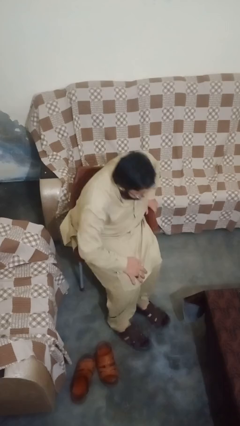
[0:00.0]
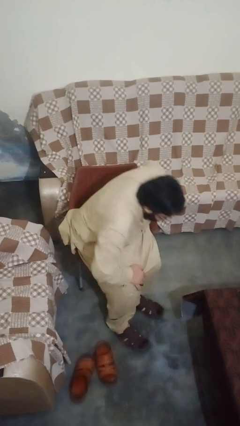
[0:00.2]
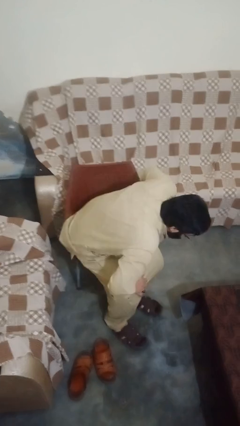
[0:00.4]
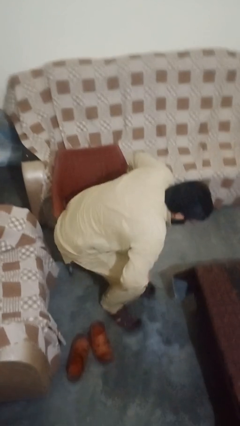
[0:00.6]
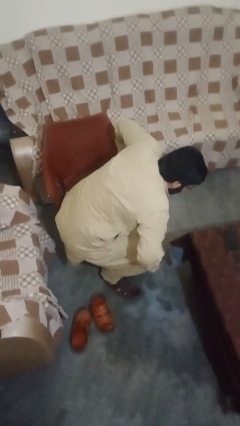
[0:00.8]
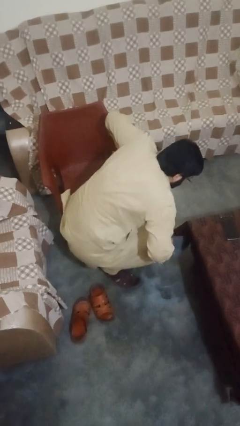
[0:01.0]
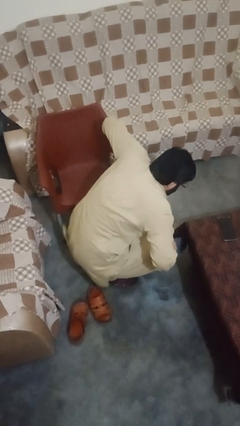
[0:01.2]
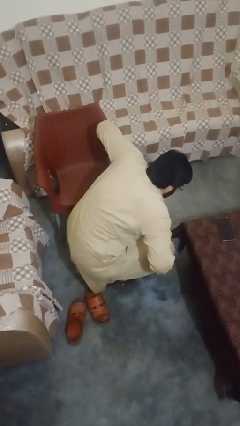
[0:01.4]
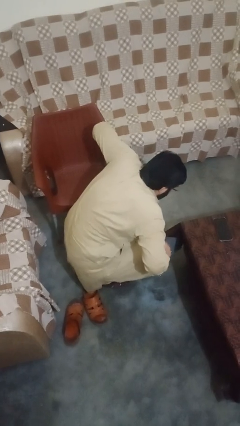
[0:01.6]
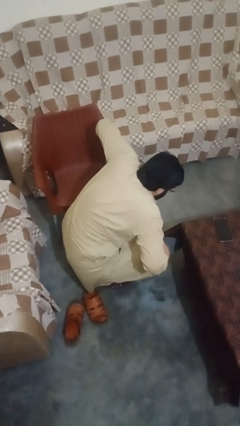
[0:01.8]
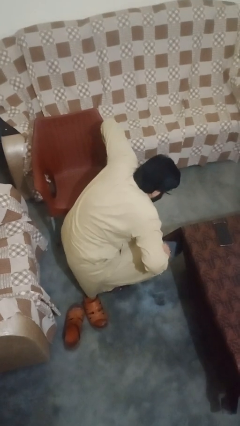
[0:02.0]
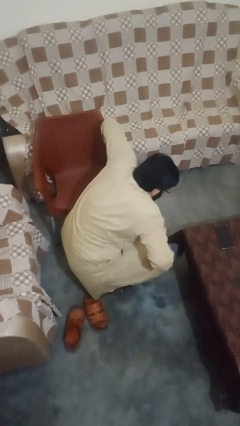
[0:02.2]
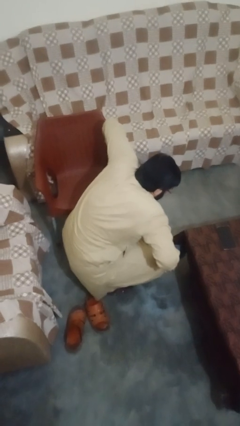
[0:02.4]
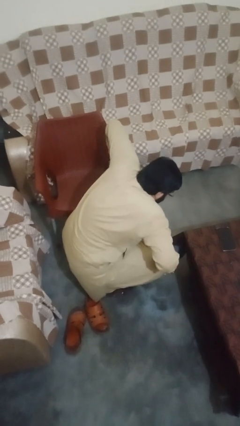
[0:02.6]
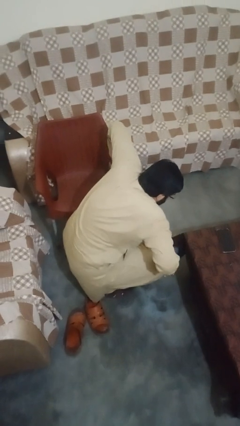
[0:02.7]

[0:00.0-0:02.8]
person falls from chair

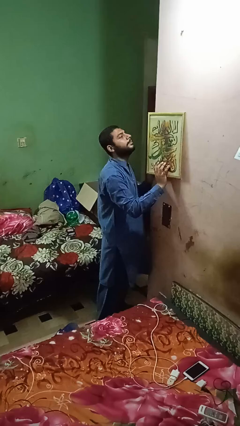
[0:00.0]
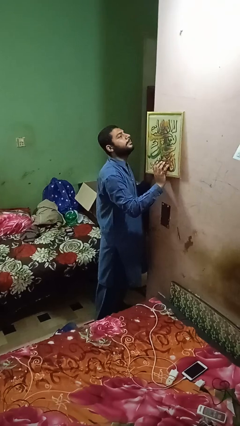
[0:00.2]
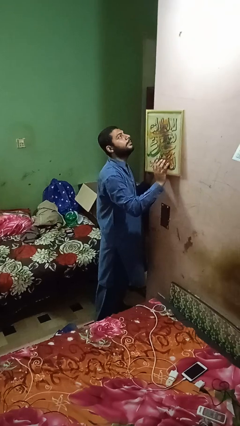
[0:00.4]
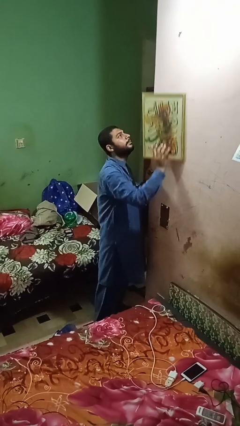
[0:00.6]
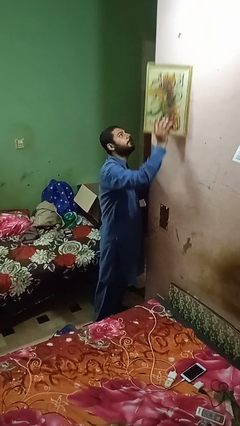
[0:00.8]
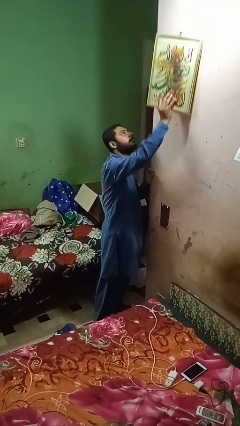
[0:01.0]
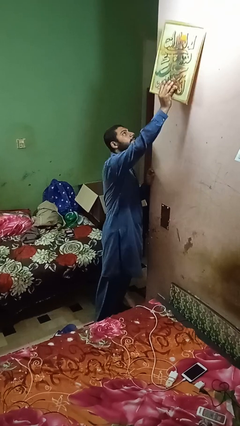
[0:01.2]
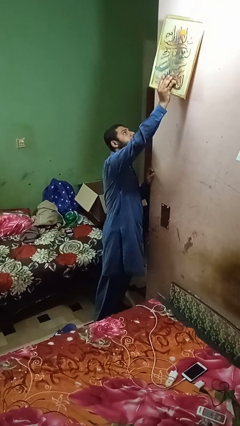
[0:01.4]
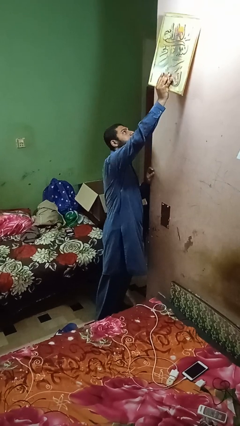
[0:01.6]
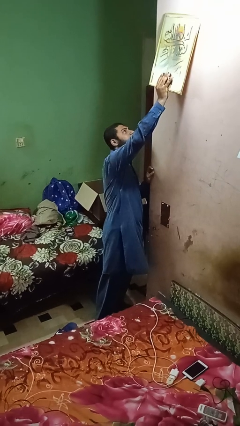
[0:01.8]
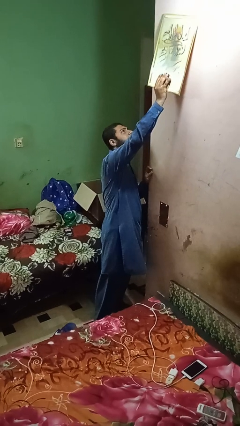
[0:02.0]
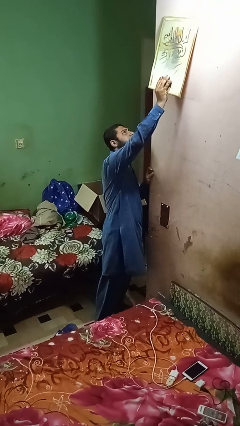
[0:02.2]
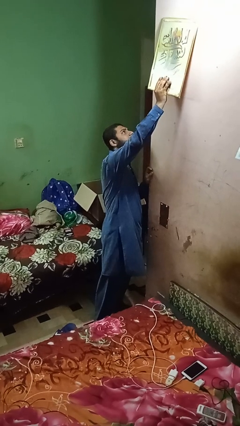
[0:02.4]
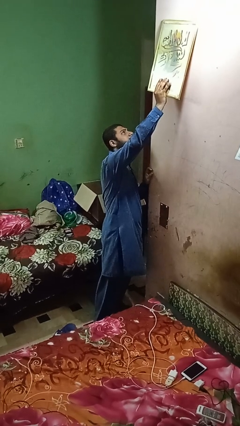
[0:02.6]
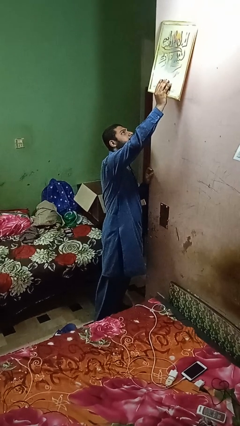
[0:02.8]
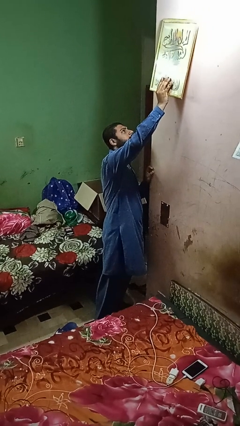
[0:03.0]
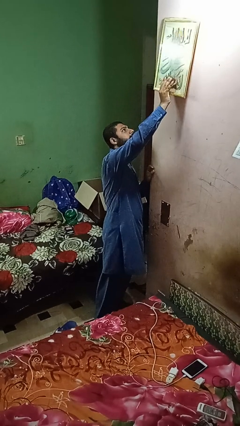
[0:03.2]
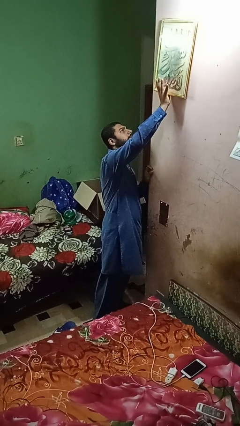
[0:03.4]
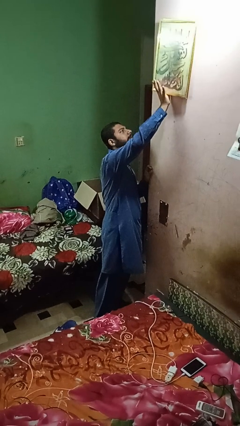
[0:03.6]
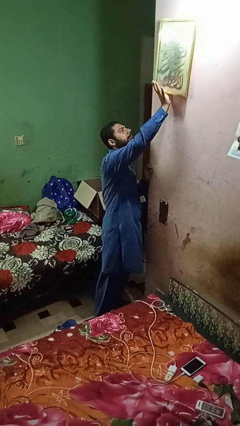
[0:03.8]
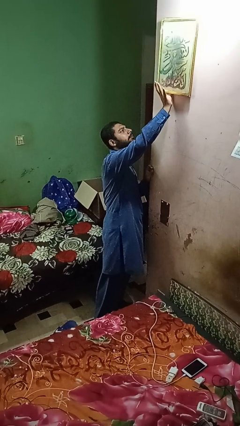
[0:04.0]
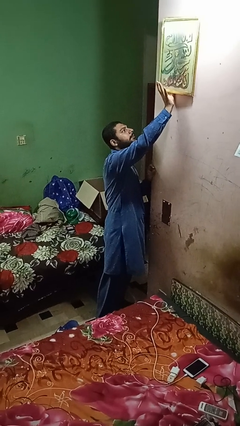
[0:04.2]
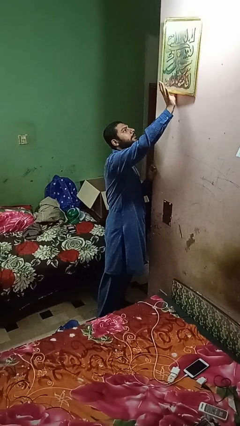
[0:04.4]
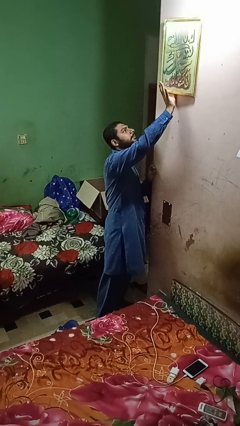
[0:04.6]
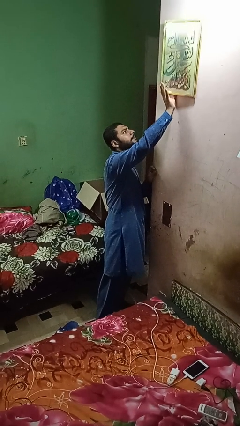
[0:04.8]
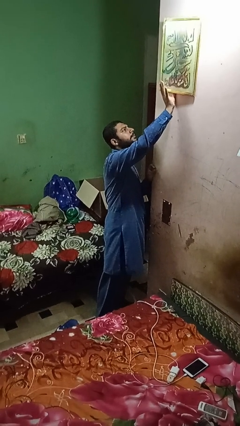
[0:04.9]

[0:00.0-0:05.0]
person puts up picture frame

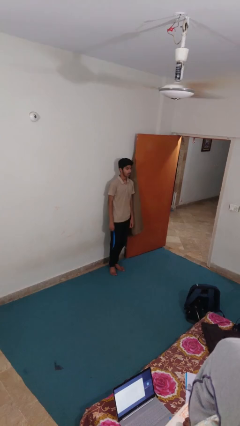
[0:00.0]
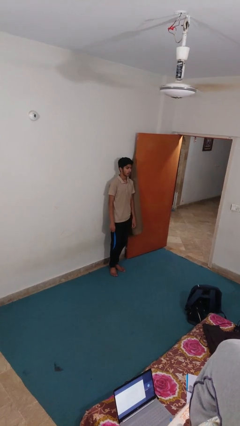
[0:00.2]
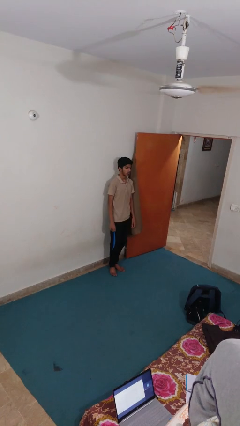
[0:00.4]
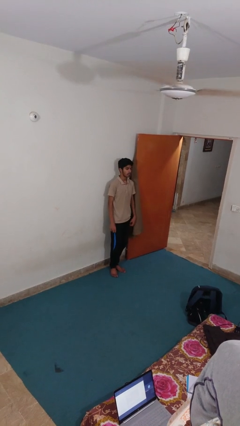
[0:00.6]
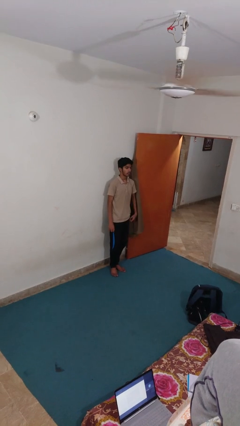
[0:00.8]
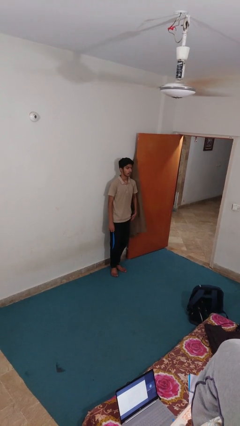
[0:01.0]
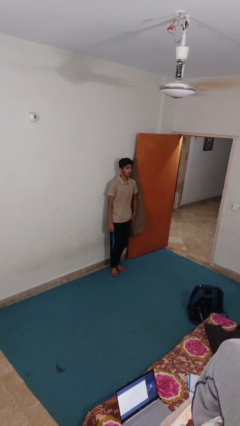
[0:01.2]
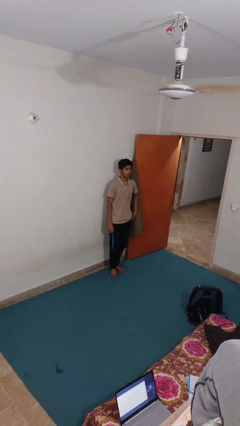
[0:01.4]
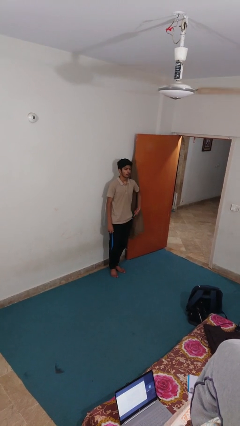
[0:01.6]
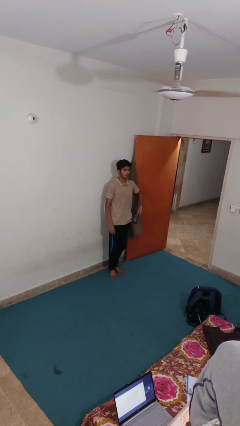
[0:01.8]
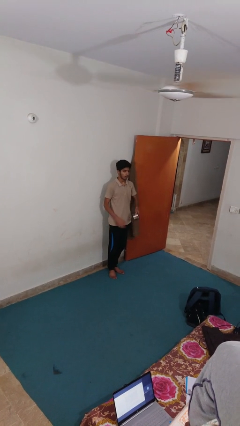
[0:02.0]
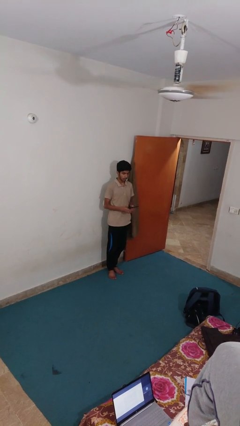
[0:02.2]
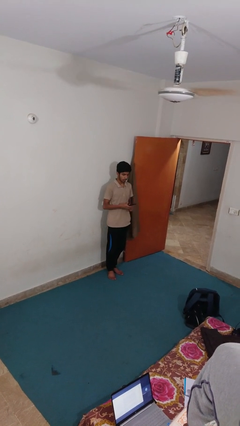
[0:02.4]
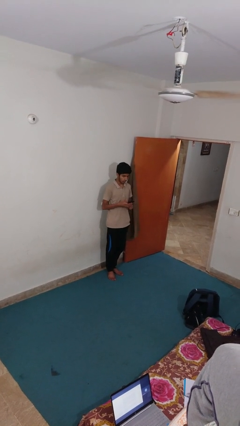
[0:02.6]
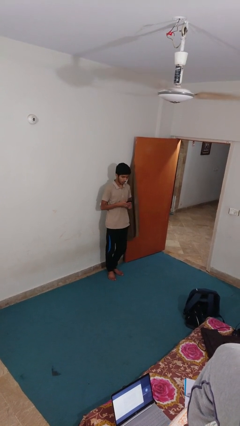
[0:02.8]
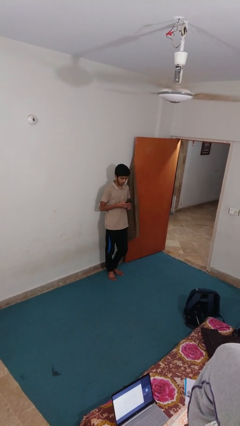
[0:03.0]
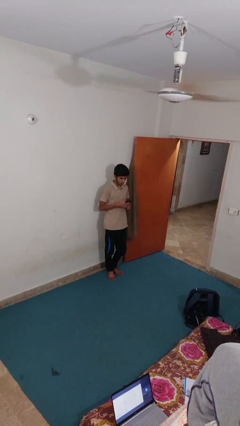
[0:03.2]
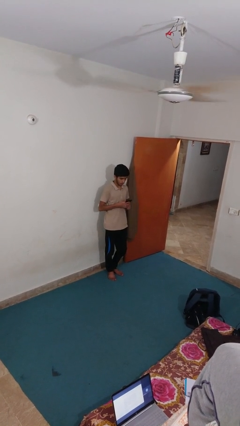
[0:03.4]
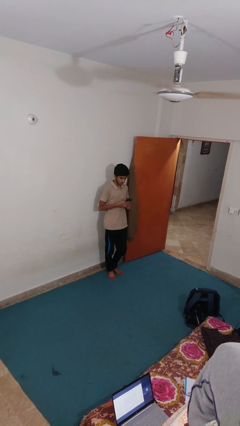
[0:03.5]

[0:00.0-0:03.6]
person takes phone from pocket

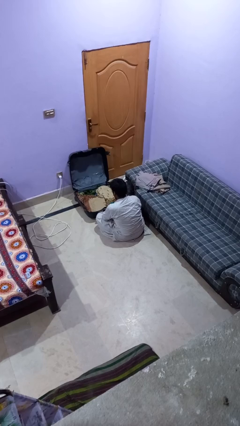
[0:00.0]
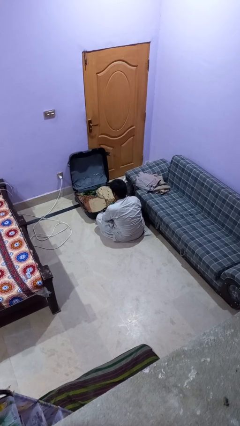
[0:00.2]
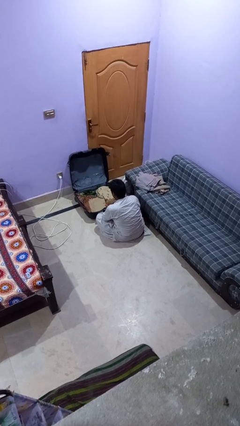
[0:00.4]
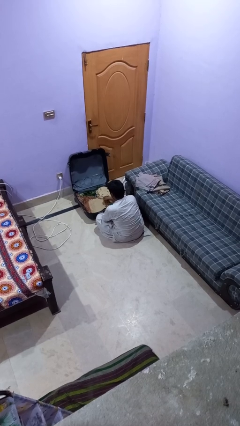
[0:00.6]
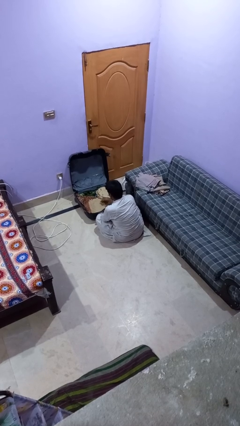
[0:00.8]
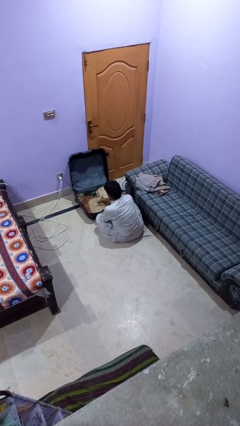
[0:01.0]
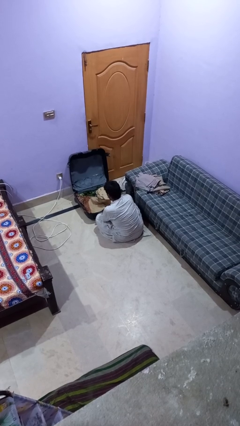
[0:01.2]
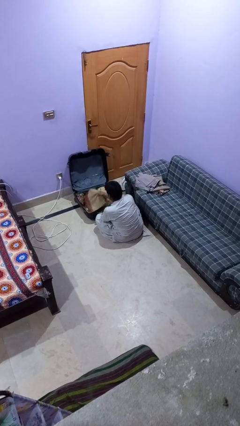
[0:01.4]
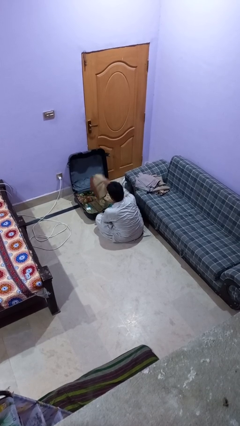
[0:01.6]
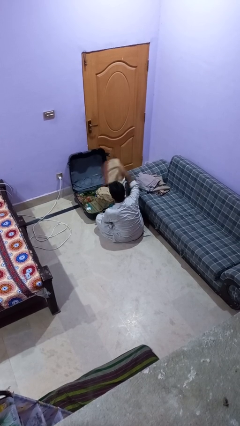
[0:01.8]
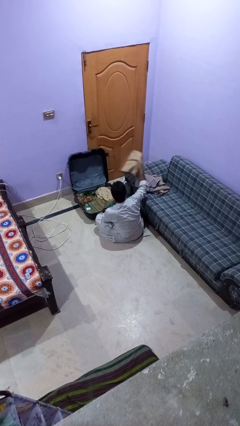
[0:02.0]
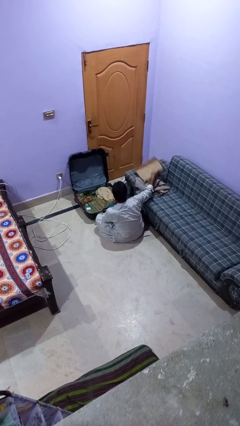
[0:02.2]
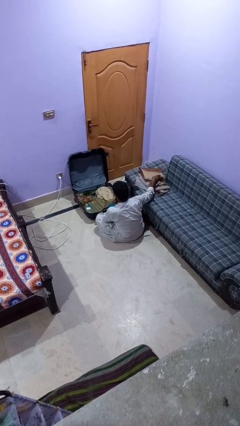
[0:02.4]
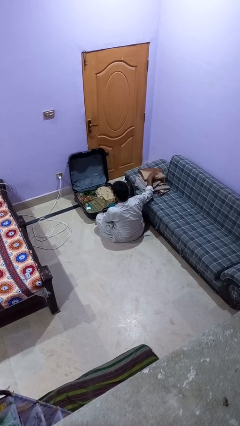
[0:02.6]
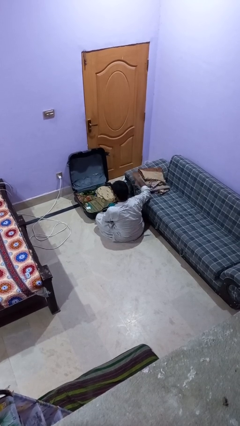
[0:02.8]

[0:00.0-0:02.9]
person unloads clothes from suitcase

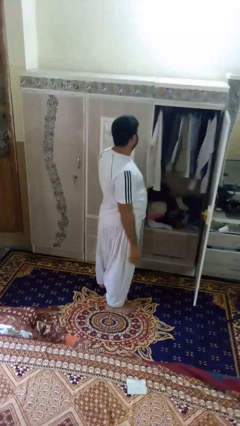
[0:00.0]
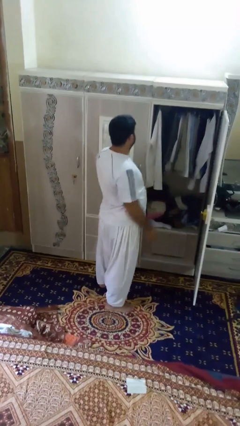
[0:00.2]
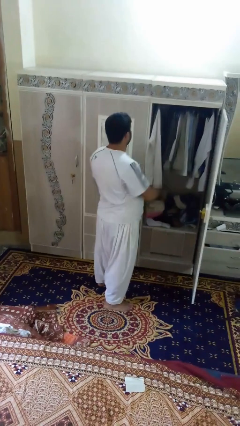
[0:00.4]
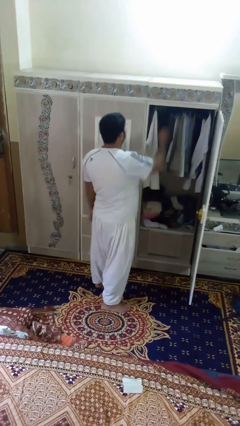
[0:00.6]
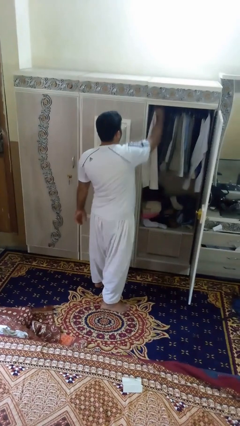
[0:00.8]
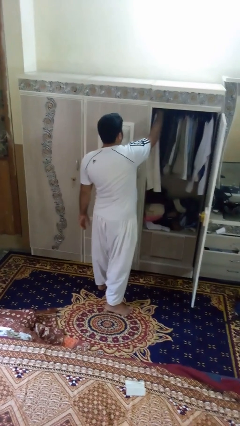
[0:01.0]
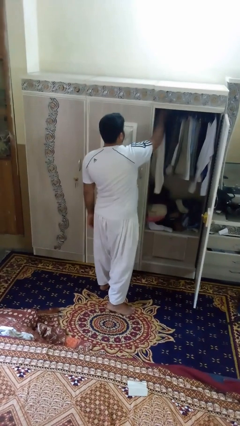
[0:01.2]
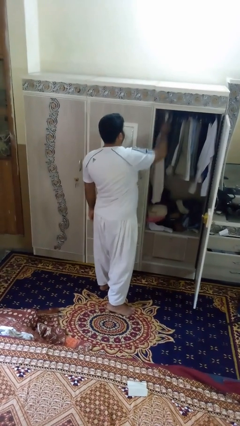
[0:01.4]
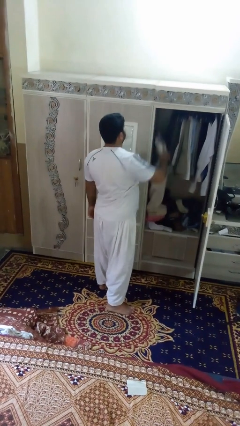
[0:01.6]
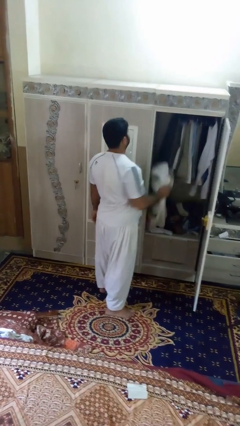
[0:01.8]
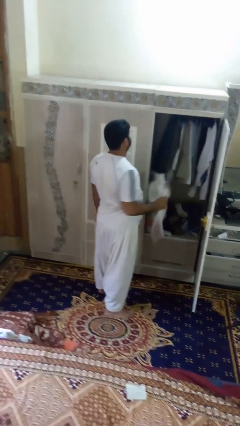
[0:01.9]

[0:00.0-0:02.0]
person takes clothes from closet

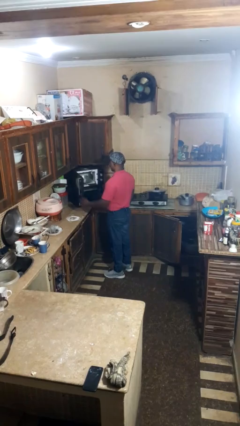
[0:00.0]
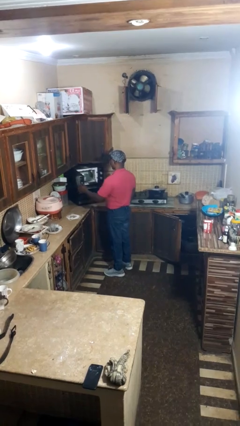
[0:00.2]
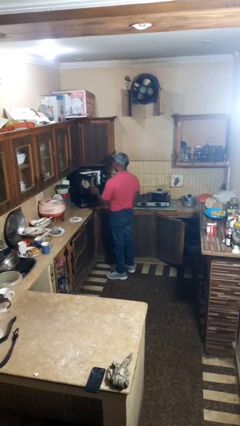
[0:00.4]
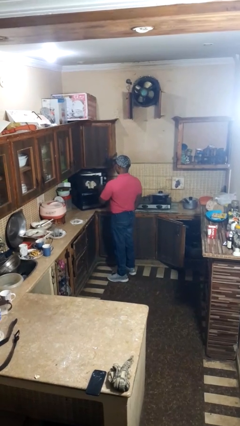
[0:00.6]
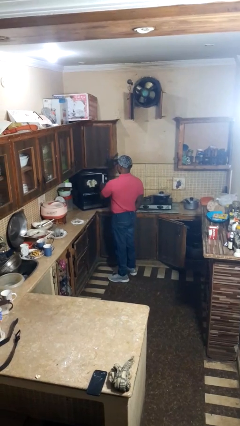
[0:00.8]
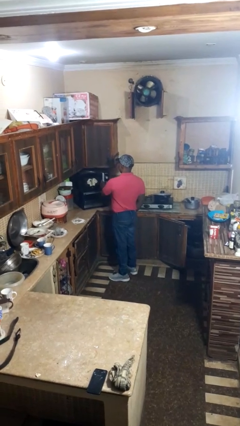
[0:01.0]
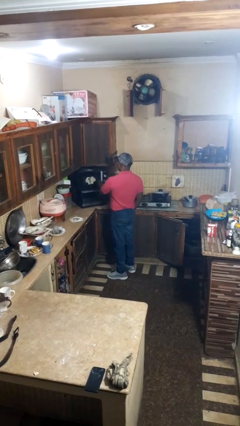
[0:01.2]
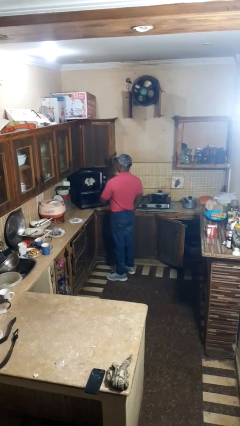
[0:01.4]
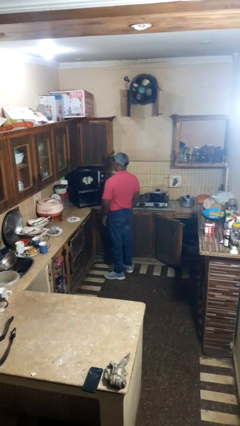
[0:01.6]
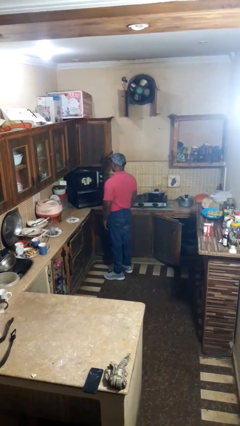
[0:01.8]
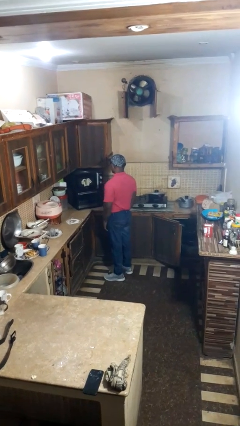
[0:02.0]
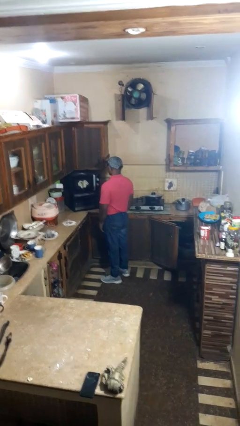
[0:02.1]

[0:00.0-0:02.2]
person closes microwave
